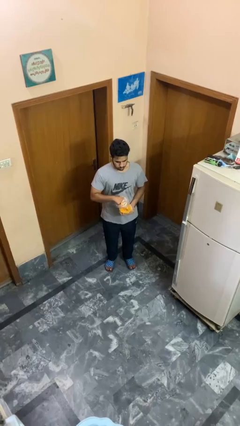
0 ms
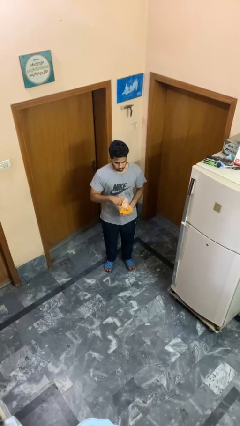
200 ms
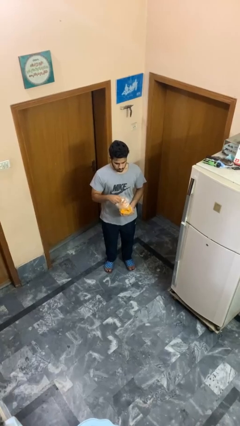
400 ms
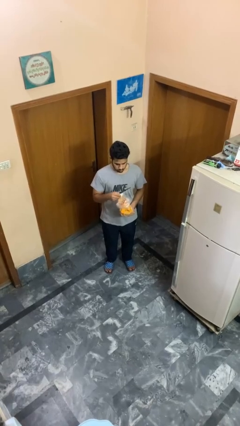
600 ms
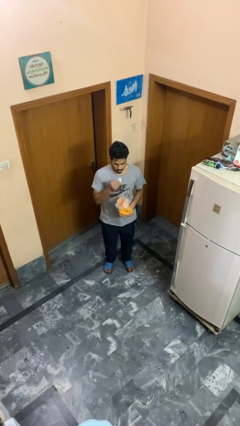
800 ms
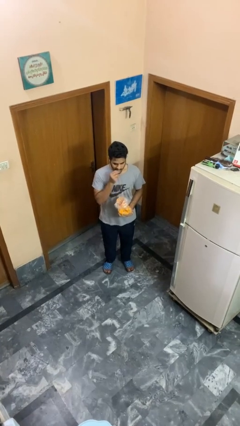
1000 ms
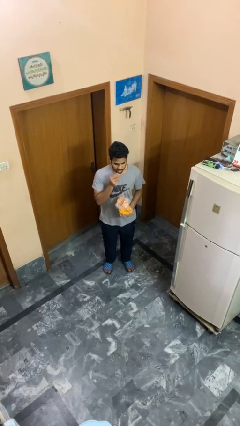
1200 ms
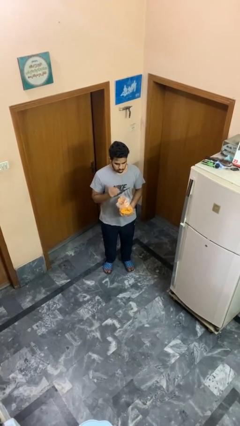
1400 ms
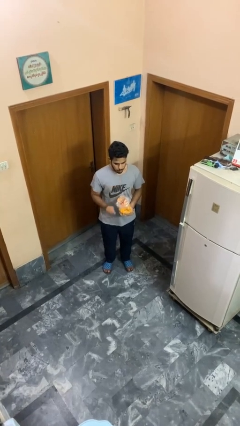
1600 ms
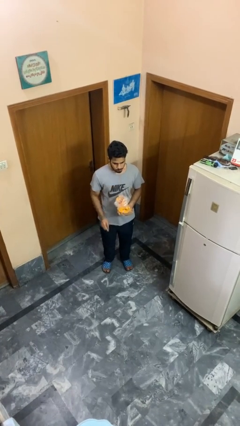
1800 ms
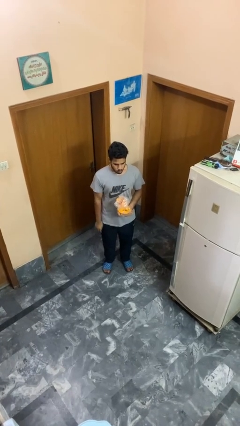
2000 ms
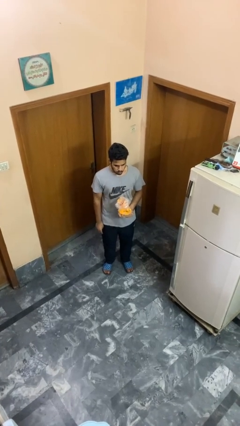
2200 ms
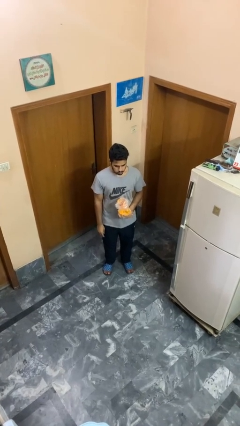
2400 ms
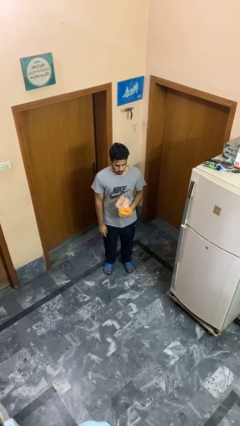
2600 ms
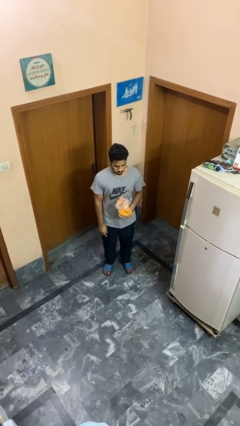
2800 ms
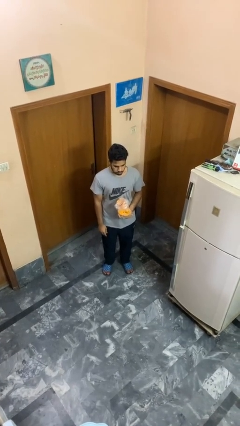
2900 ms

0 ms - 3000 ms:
person eats snack from bag

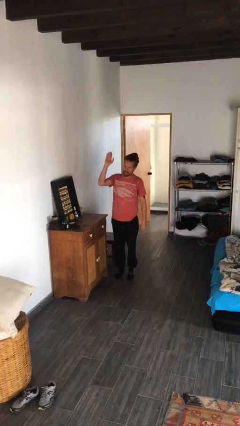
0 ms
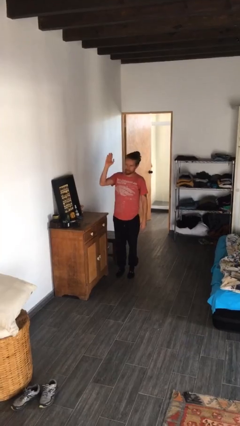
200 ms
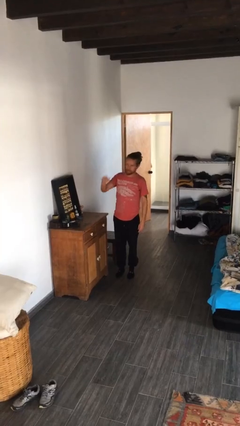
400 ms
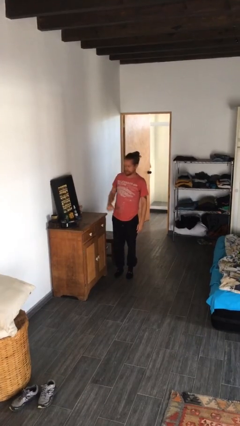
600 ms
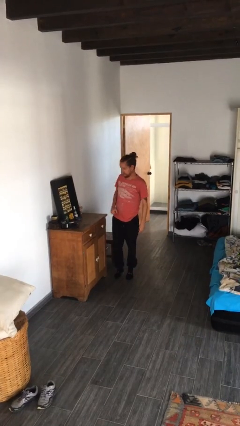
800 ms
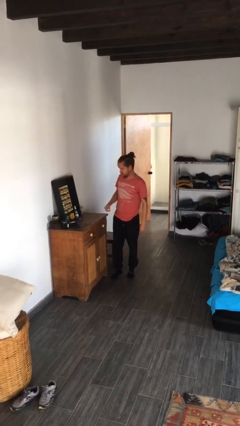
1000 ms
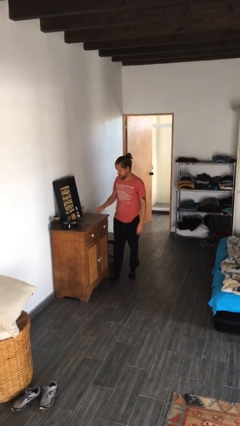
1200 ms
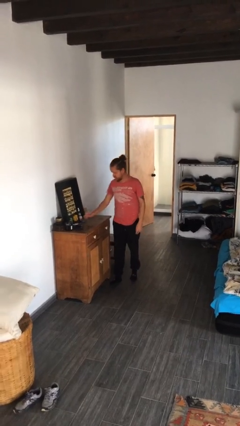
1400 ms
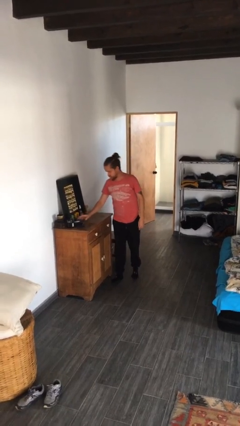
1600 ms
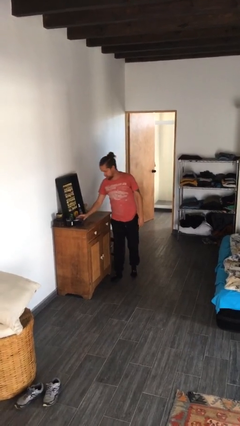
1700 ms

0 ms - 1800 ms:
person gestures lower hand

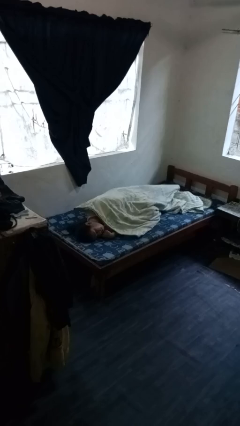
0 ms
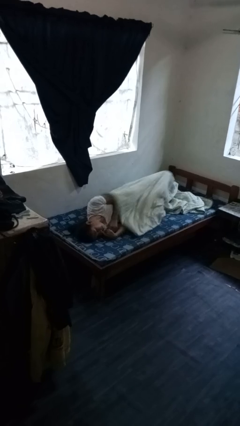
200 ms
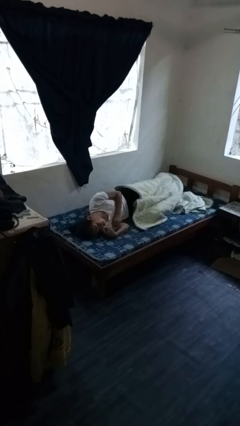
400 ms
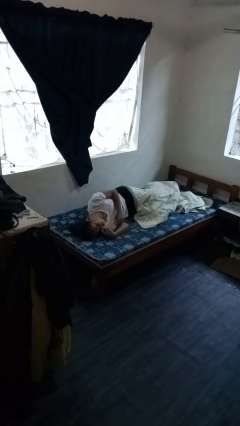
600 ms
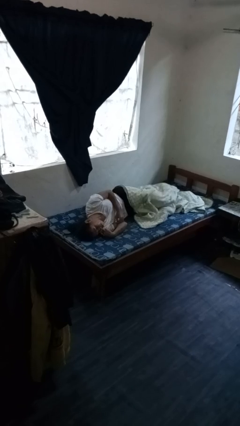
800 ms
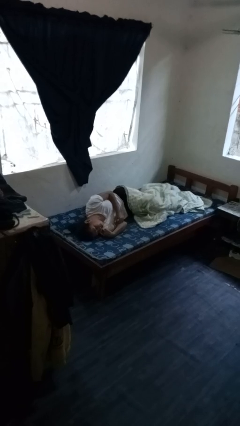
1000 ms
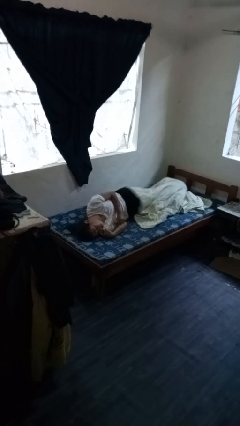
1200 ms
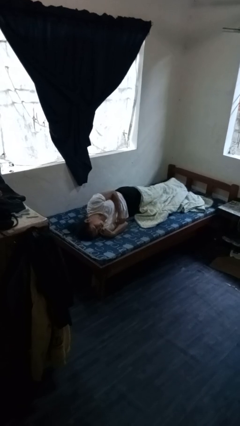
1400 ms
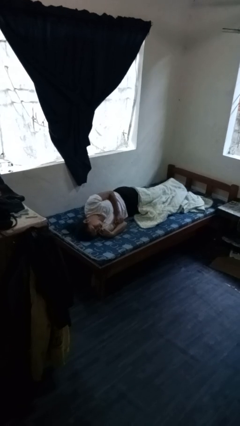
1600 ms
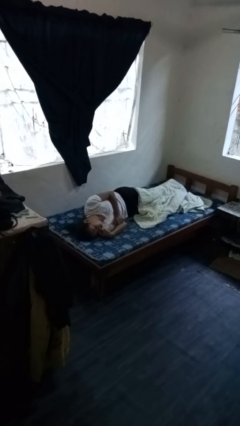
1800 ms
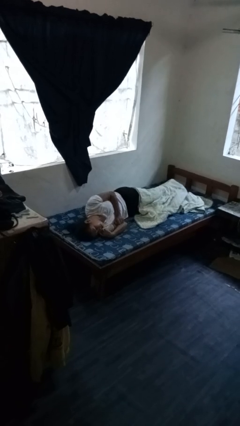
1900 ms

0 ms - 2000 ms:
person uncovers with bedsheets

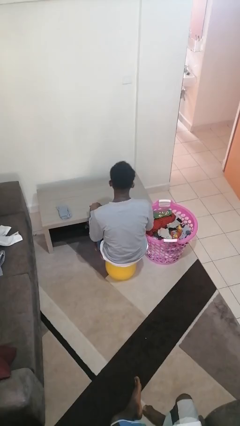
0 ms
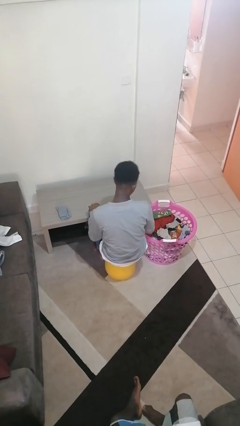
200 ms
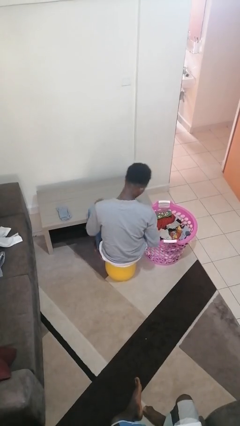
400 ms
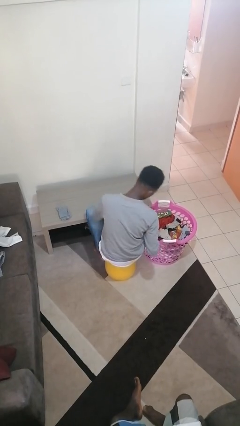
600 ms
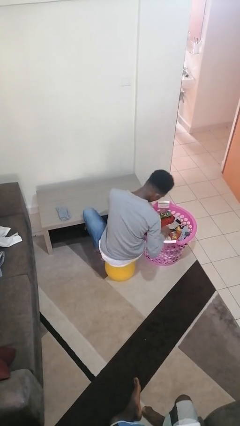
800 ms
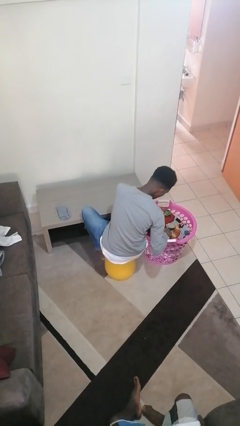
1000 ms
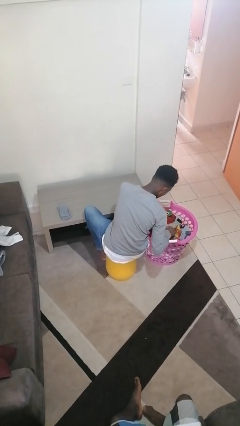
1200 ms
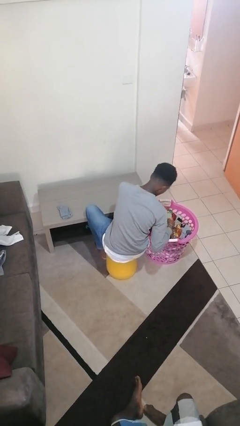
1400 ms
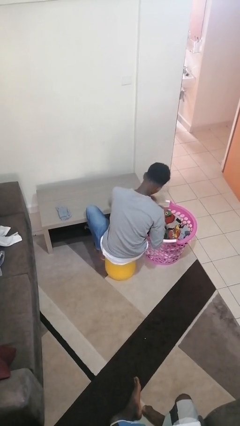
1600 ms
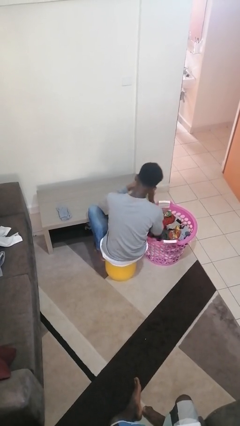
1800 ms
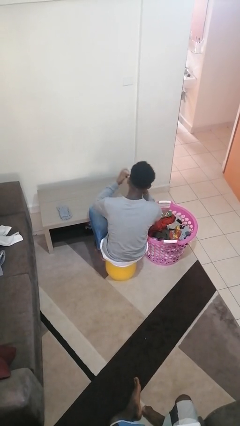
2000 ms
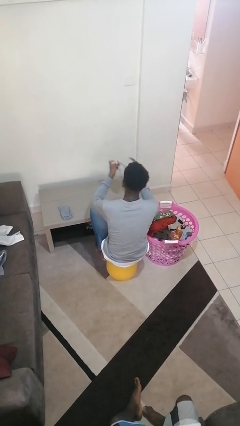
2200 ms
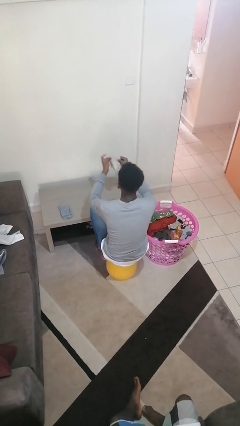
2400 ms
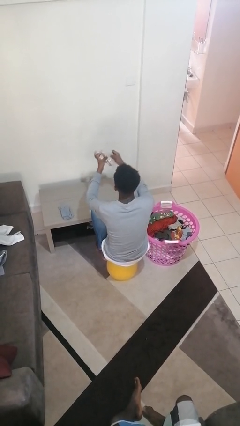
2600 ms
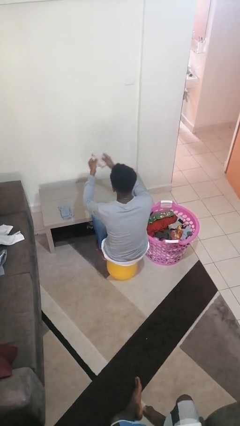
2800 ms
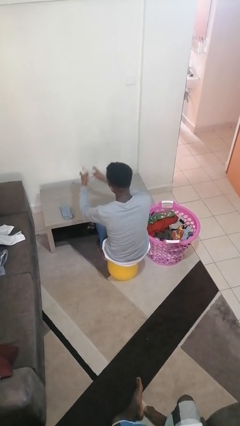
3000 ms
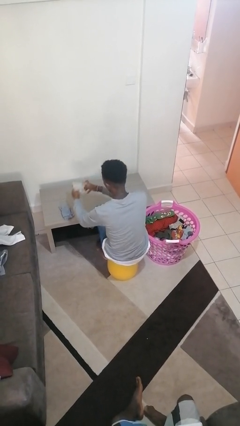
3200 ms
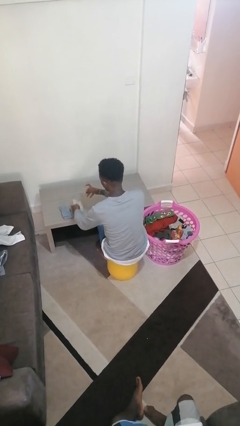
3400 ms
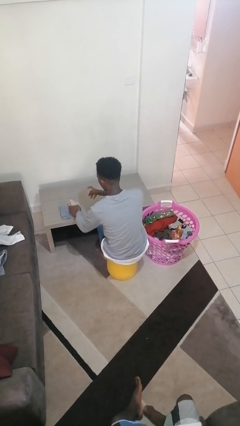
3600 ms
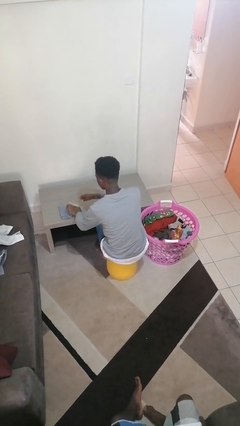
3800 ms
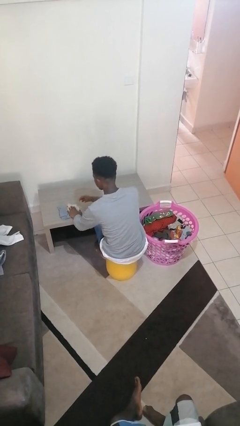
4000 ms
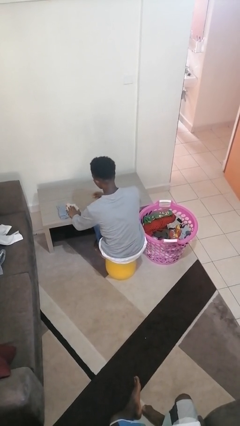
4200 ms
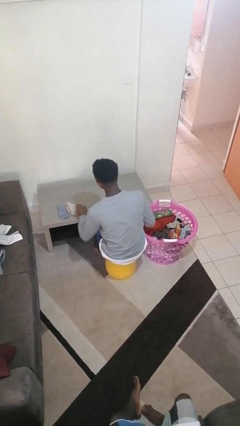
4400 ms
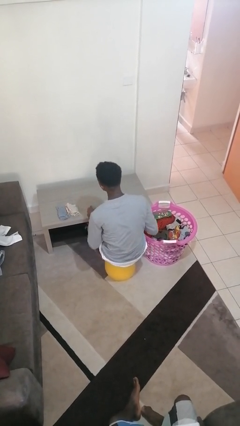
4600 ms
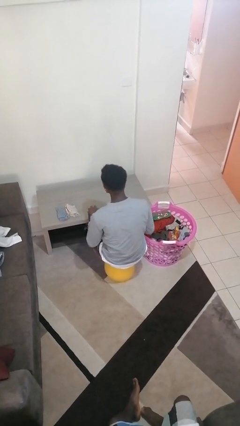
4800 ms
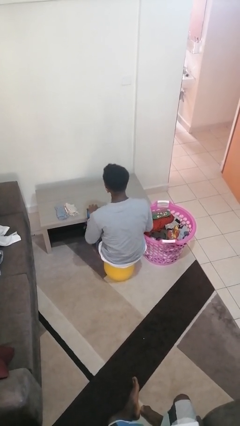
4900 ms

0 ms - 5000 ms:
person folds socks

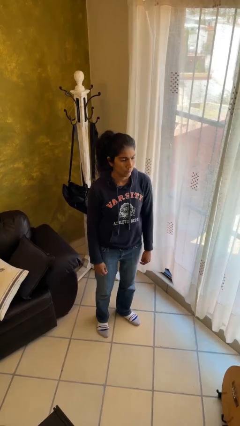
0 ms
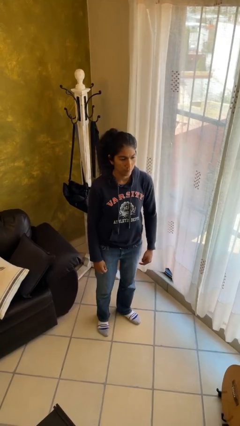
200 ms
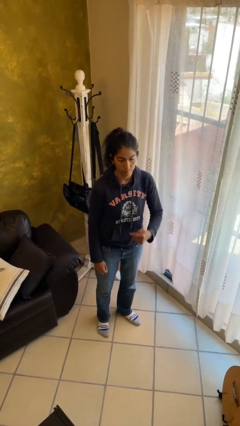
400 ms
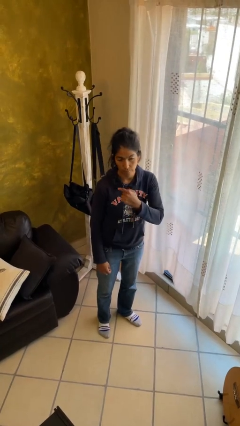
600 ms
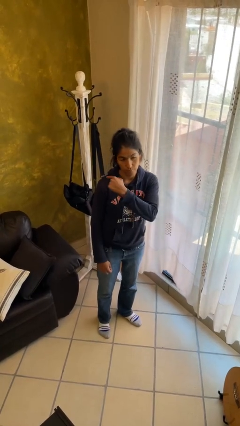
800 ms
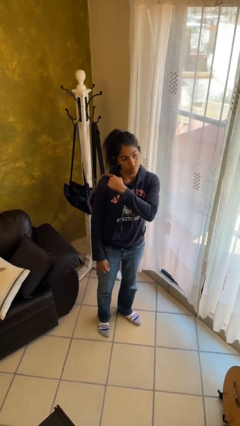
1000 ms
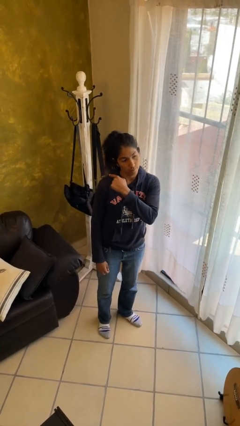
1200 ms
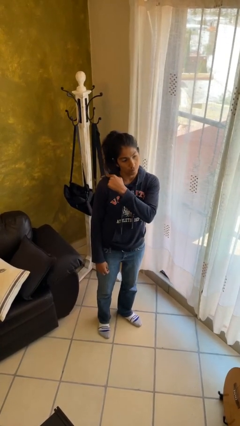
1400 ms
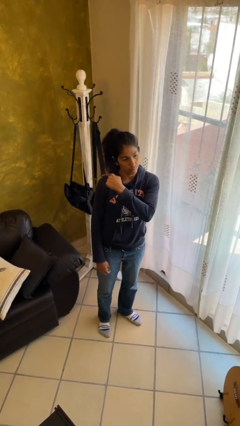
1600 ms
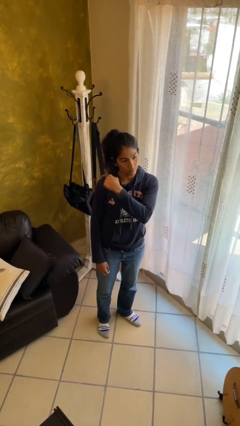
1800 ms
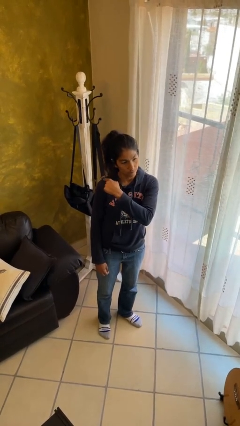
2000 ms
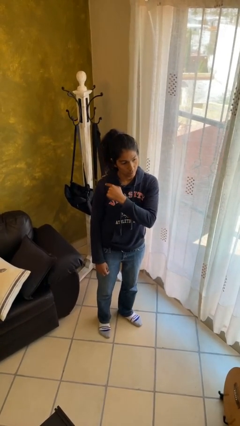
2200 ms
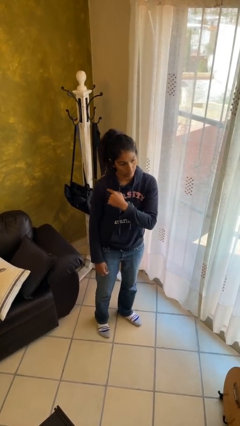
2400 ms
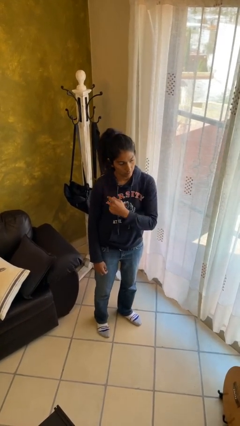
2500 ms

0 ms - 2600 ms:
person gestures behind me

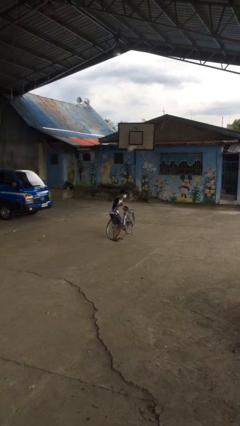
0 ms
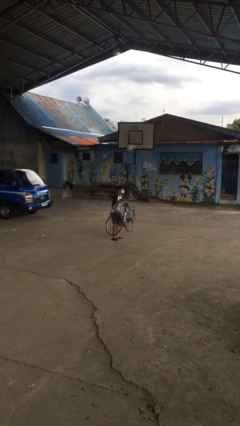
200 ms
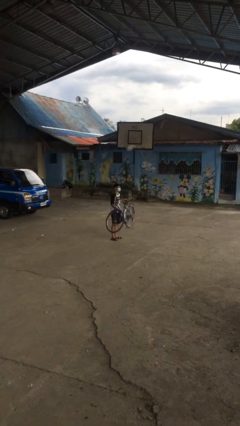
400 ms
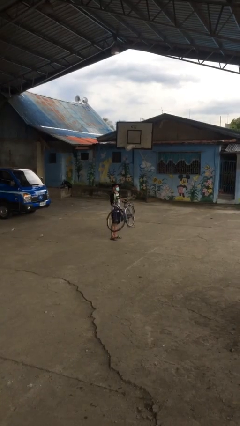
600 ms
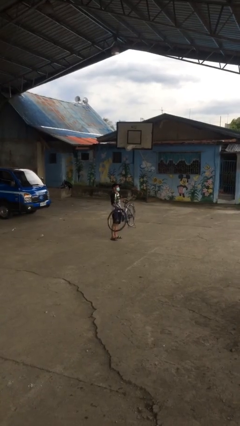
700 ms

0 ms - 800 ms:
person picks up object from floor

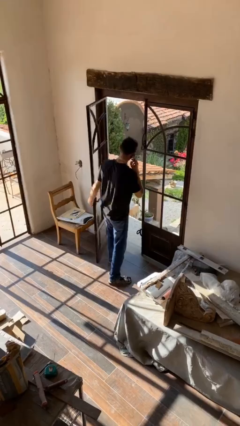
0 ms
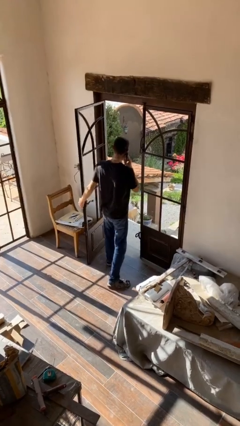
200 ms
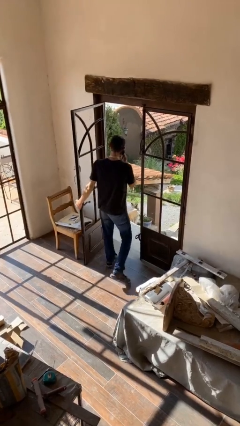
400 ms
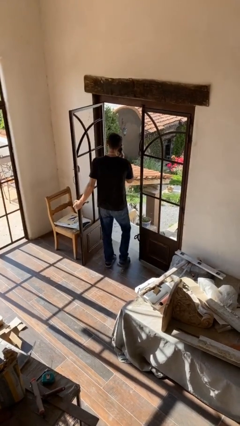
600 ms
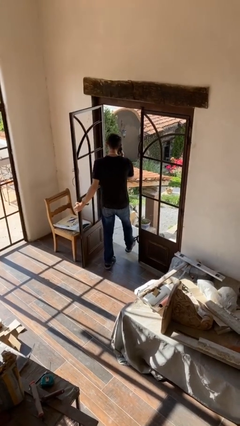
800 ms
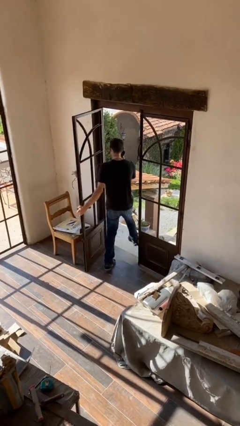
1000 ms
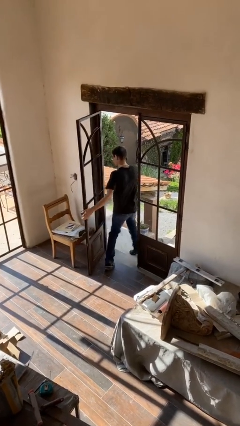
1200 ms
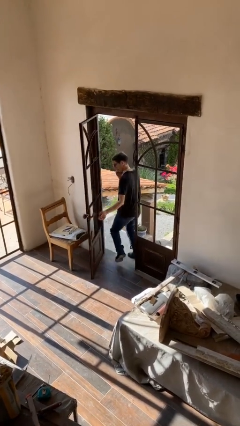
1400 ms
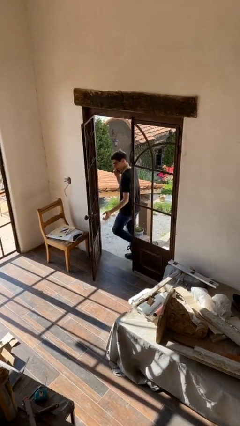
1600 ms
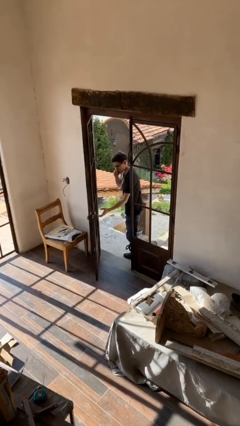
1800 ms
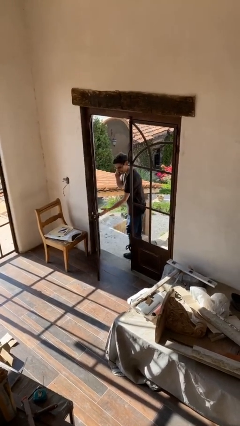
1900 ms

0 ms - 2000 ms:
person exits scene through structure
